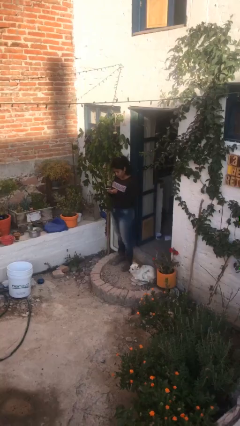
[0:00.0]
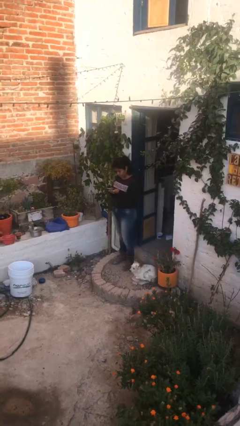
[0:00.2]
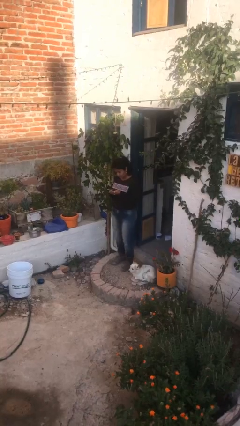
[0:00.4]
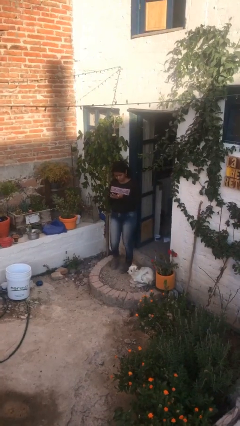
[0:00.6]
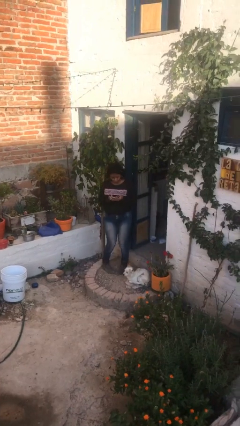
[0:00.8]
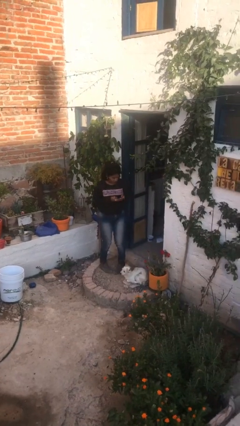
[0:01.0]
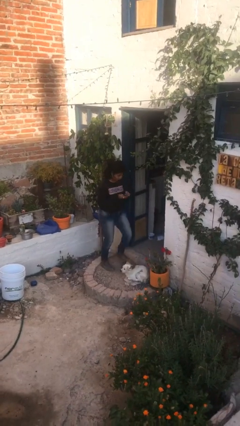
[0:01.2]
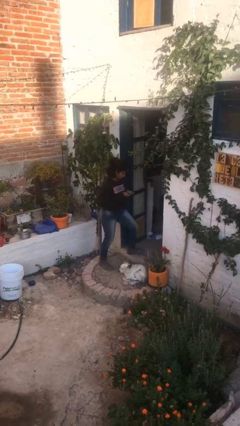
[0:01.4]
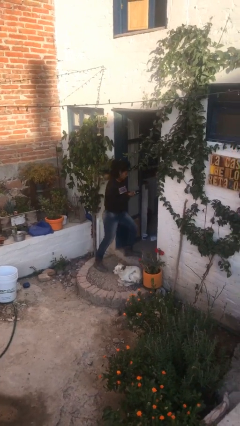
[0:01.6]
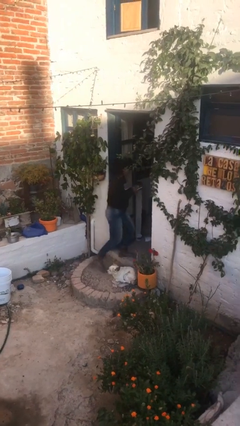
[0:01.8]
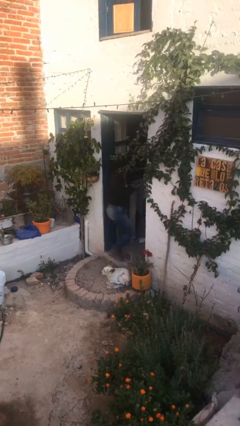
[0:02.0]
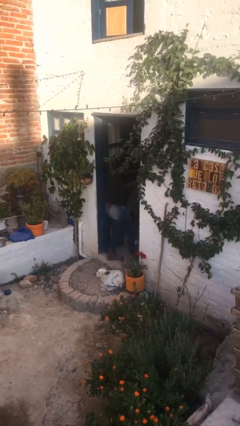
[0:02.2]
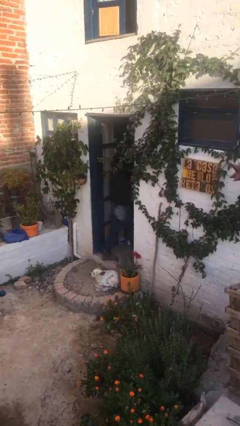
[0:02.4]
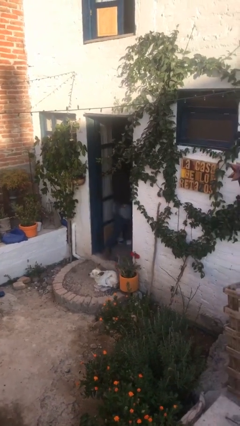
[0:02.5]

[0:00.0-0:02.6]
person exits scene through structure

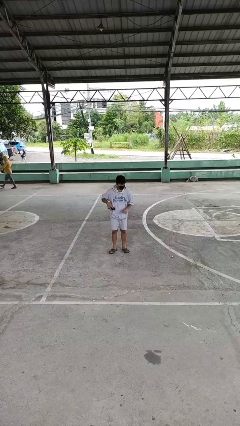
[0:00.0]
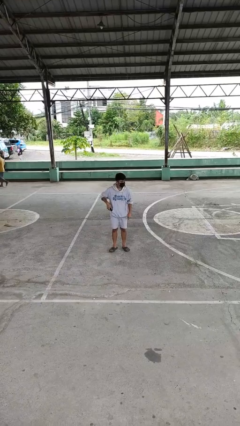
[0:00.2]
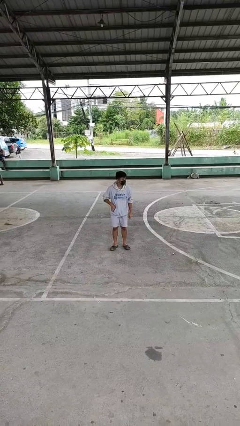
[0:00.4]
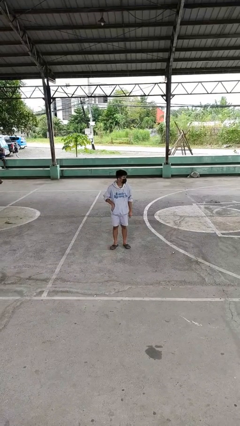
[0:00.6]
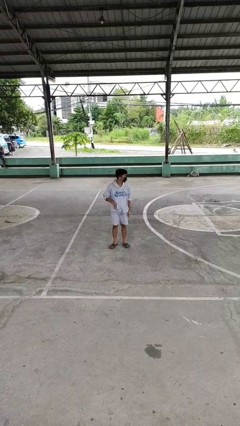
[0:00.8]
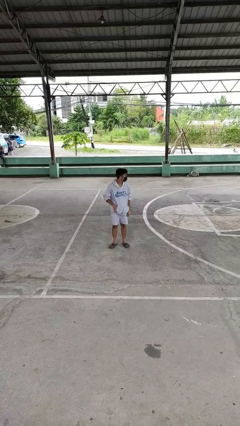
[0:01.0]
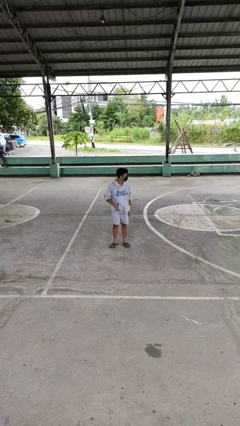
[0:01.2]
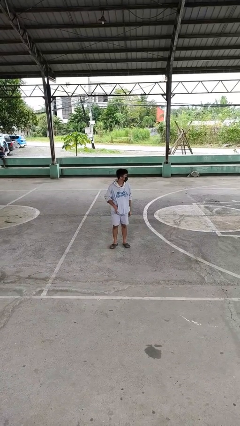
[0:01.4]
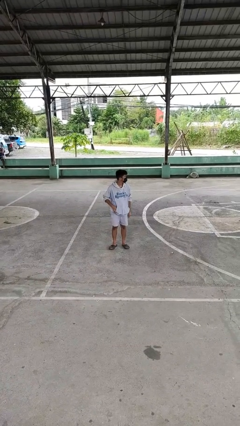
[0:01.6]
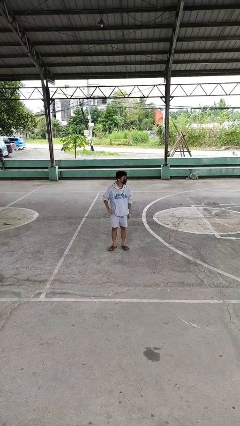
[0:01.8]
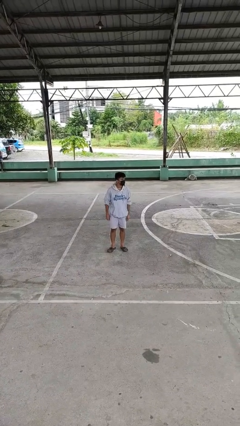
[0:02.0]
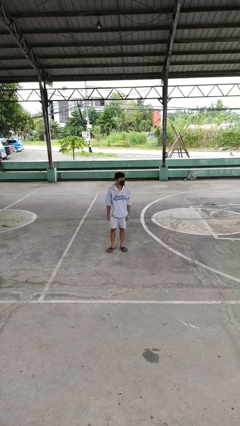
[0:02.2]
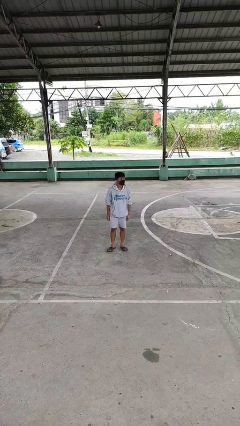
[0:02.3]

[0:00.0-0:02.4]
person puts phone into pocket

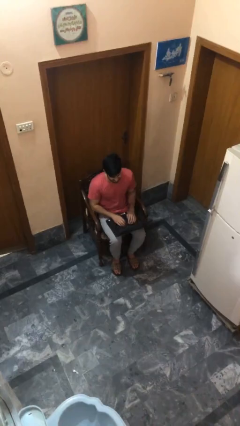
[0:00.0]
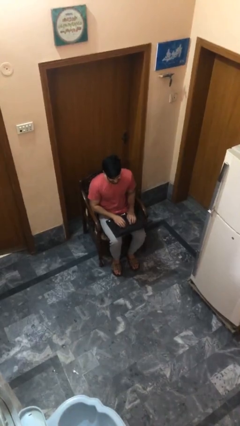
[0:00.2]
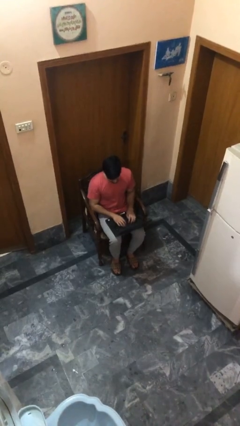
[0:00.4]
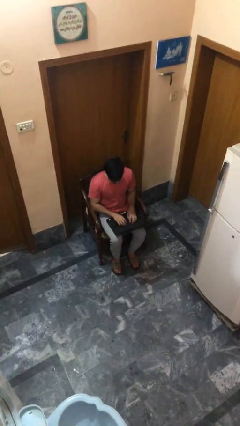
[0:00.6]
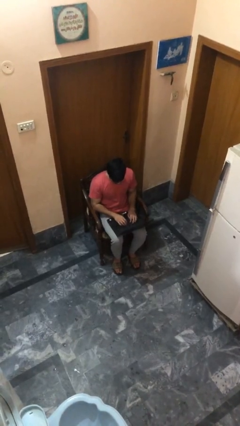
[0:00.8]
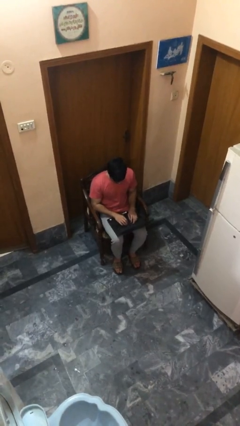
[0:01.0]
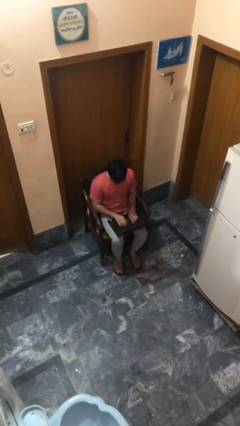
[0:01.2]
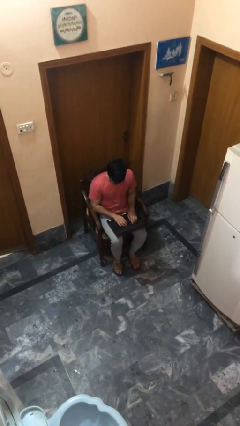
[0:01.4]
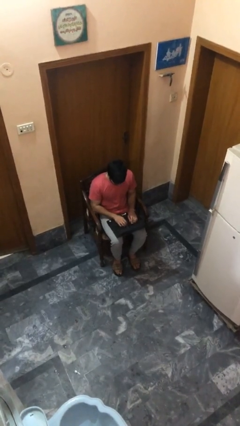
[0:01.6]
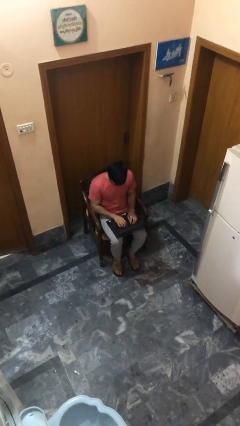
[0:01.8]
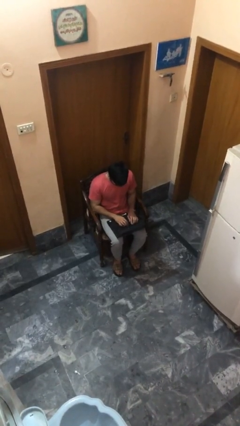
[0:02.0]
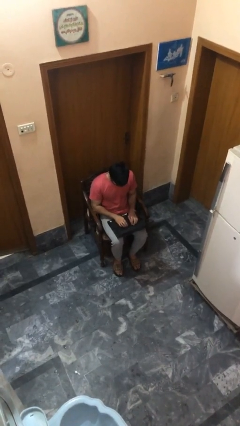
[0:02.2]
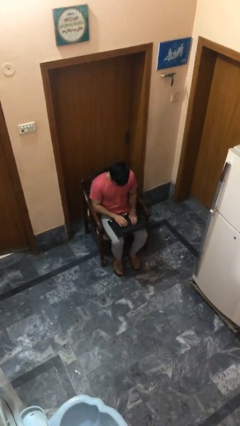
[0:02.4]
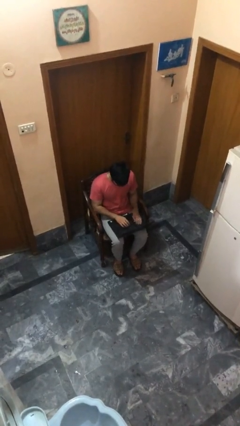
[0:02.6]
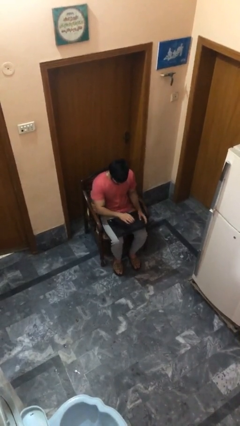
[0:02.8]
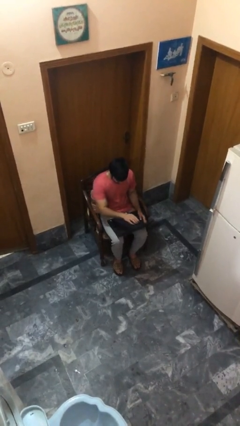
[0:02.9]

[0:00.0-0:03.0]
person interacts with laptop

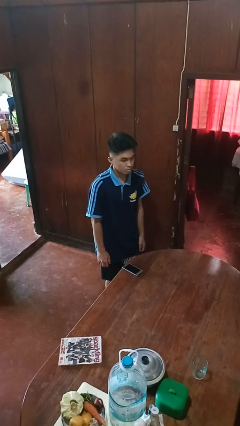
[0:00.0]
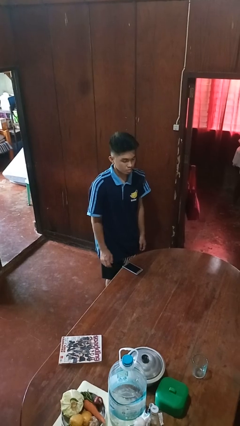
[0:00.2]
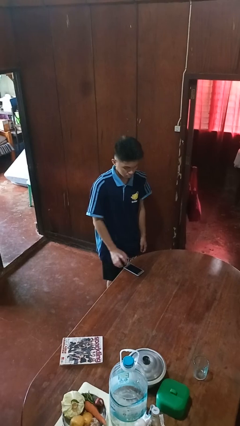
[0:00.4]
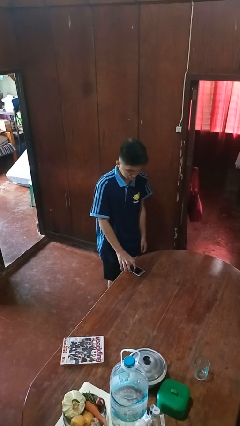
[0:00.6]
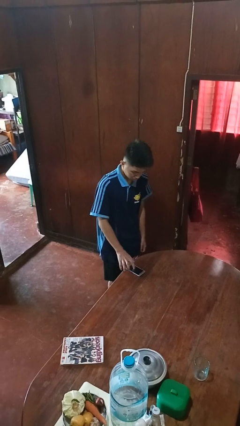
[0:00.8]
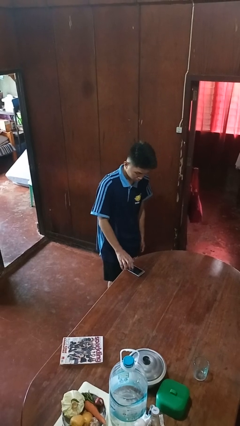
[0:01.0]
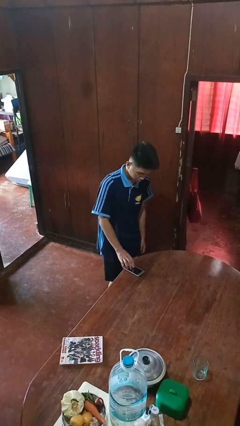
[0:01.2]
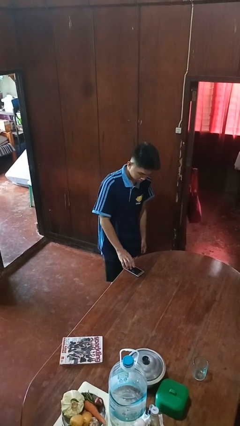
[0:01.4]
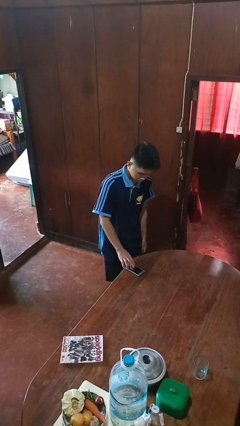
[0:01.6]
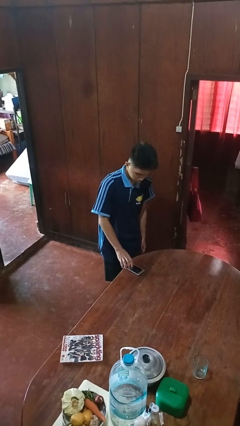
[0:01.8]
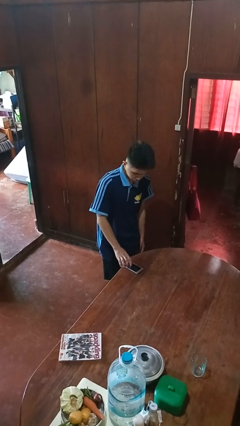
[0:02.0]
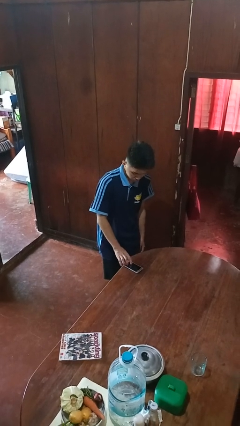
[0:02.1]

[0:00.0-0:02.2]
person taps object with finger

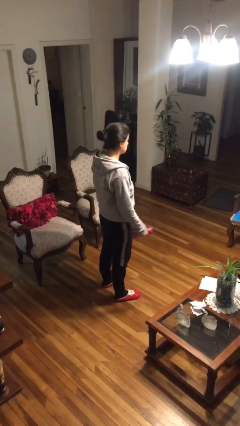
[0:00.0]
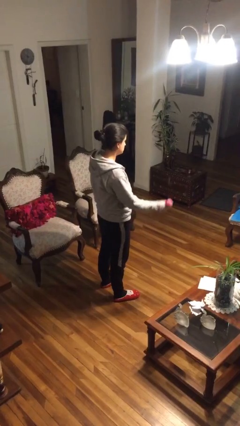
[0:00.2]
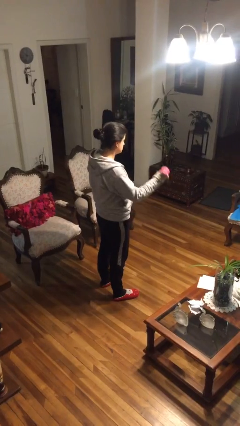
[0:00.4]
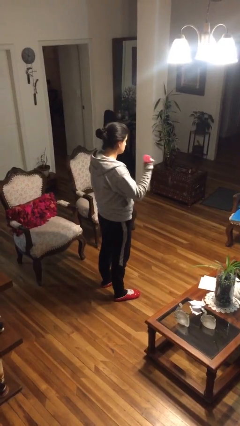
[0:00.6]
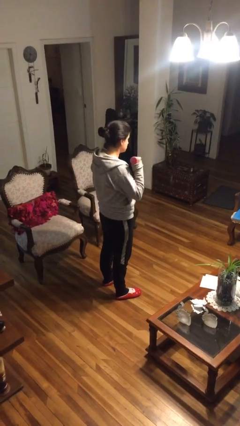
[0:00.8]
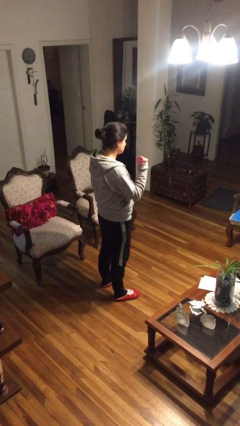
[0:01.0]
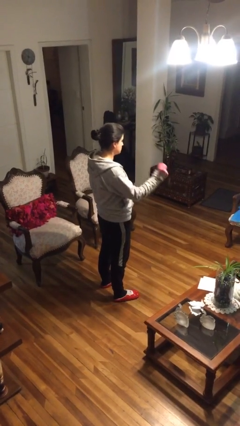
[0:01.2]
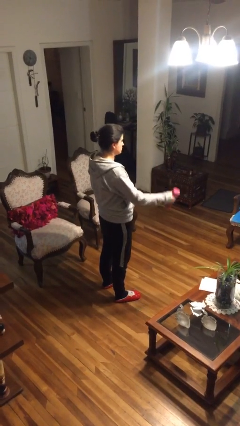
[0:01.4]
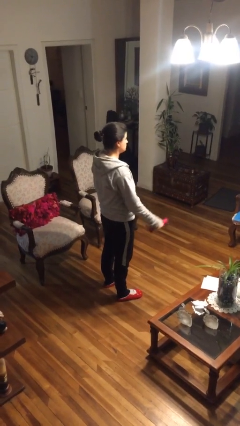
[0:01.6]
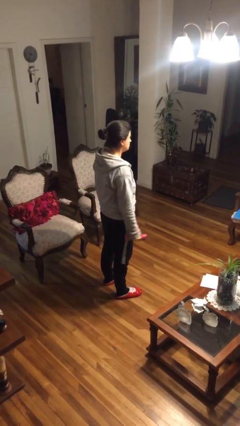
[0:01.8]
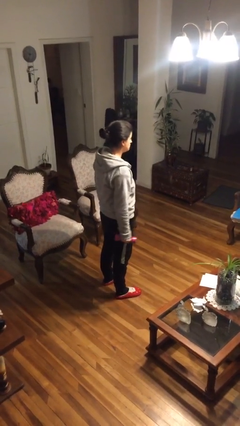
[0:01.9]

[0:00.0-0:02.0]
person lifts dumbbells

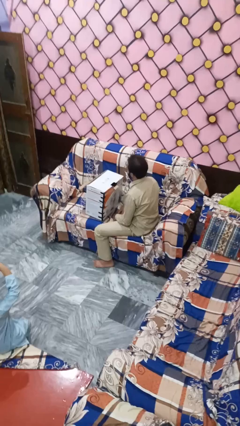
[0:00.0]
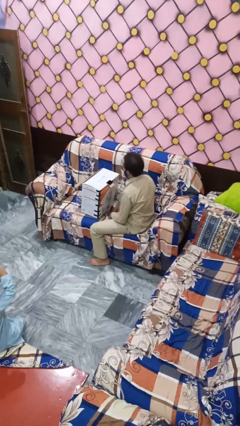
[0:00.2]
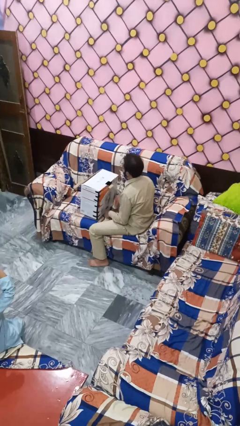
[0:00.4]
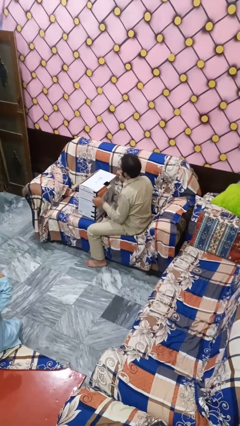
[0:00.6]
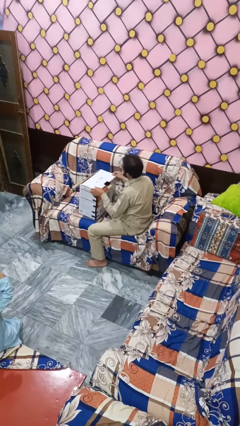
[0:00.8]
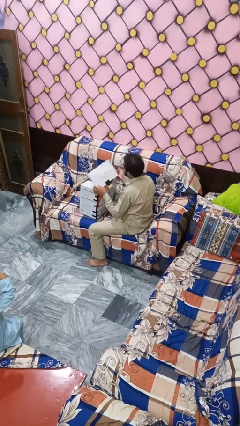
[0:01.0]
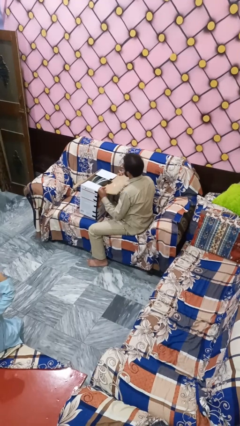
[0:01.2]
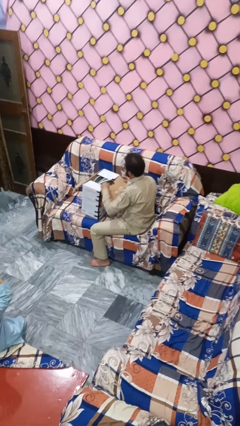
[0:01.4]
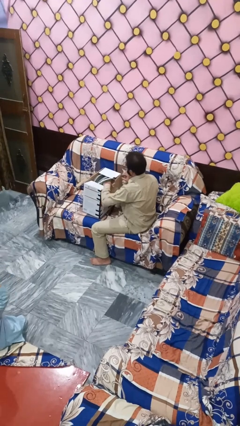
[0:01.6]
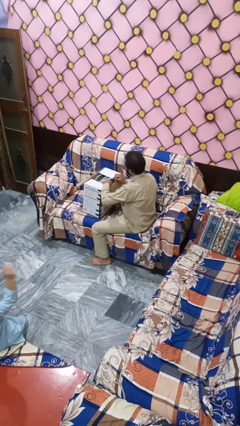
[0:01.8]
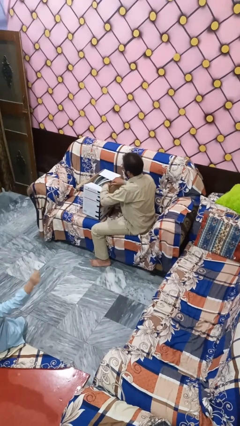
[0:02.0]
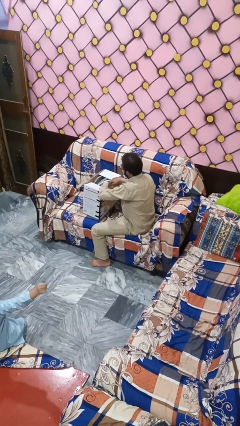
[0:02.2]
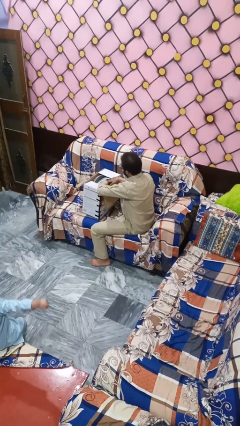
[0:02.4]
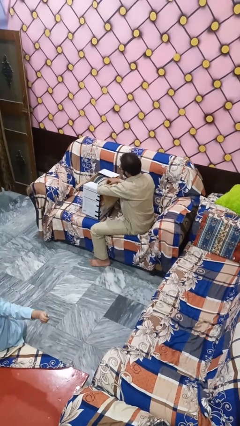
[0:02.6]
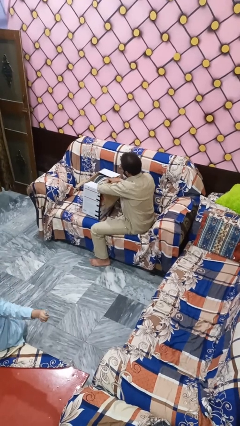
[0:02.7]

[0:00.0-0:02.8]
person searches in box

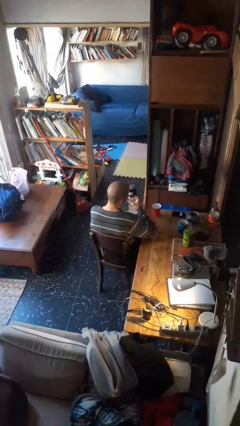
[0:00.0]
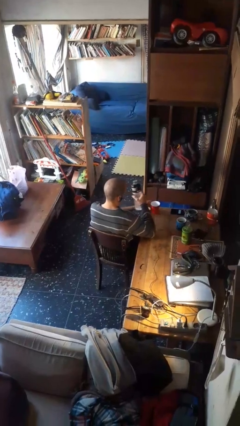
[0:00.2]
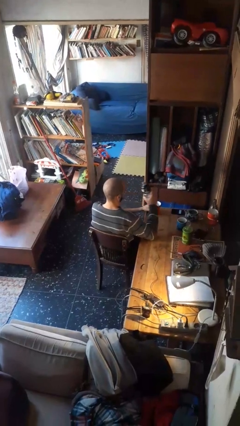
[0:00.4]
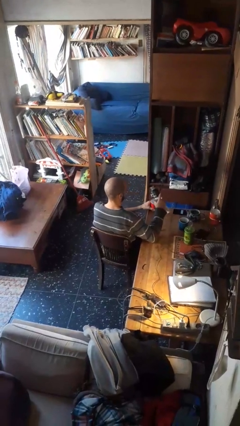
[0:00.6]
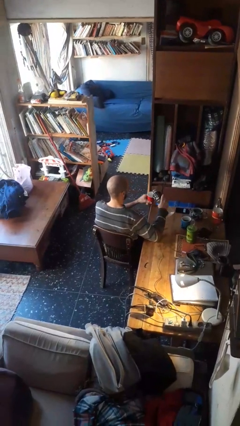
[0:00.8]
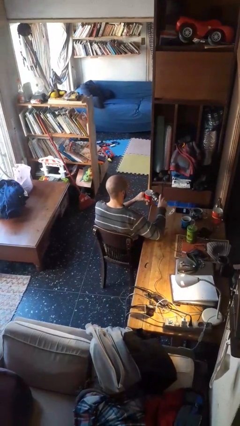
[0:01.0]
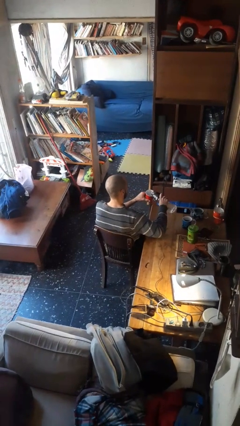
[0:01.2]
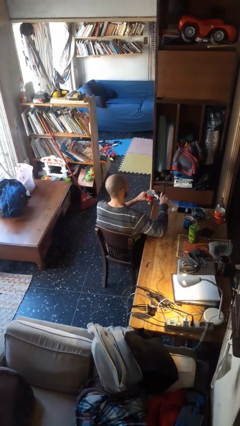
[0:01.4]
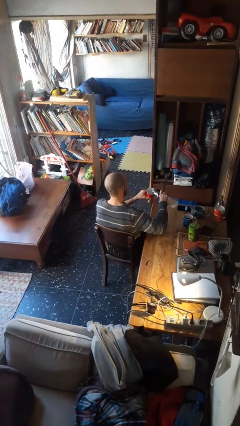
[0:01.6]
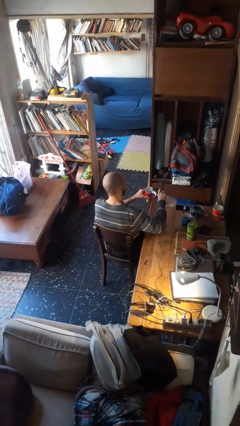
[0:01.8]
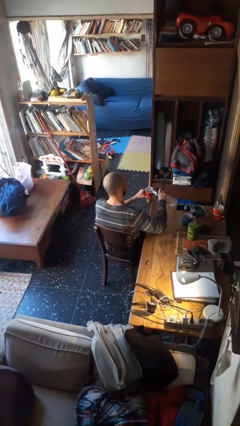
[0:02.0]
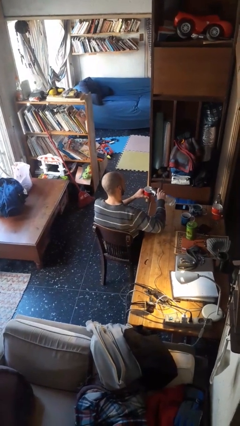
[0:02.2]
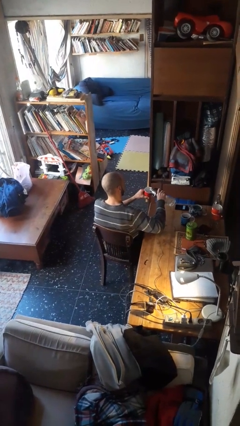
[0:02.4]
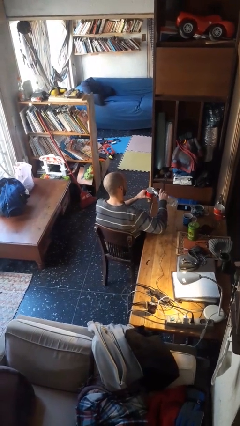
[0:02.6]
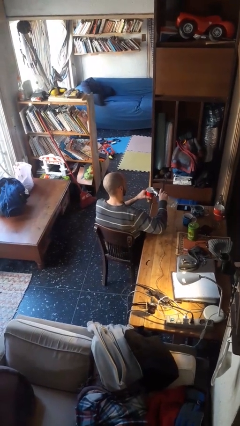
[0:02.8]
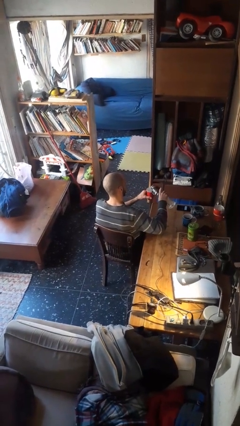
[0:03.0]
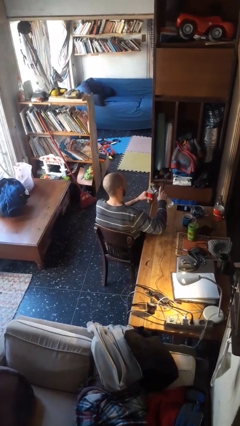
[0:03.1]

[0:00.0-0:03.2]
person pours liquid into cup
